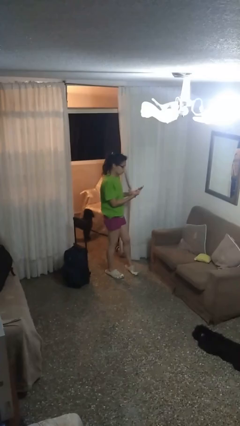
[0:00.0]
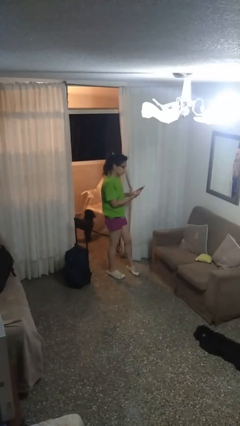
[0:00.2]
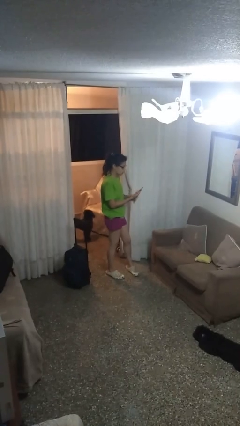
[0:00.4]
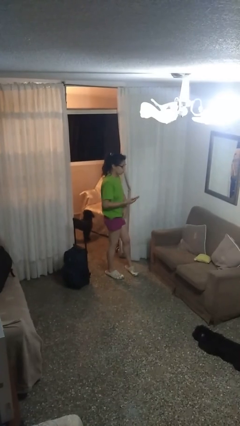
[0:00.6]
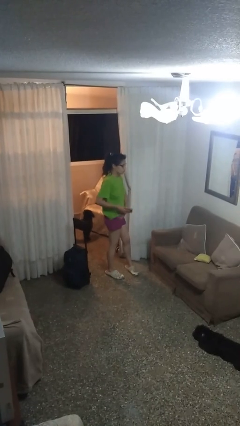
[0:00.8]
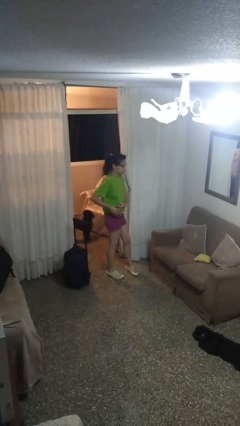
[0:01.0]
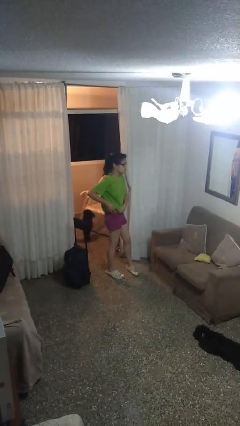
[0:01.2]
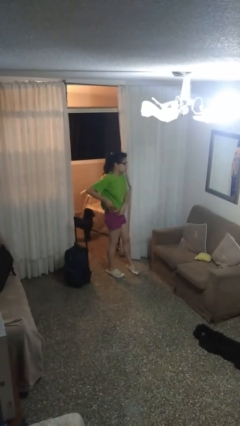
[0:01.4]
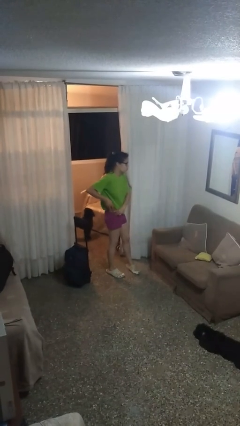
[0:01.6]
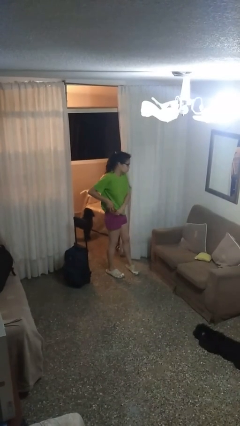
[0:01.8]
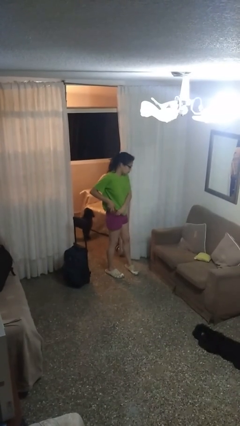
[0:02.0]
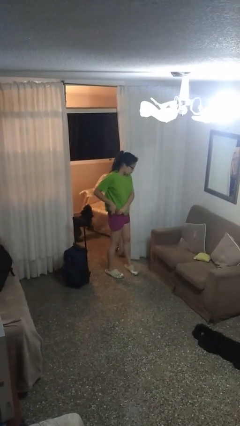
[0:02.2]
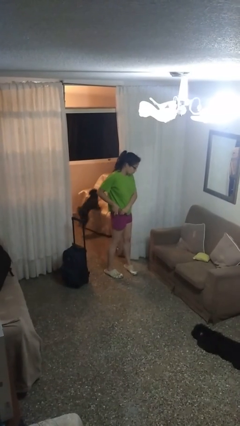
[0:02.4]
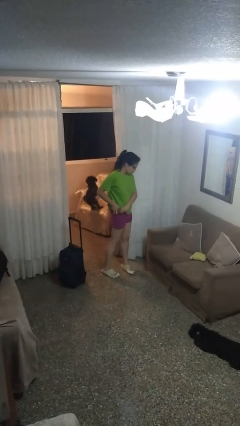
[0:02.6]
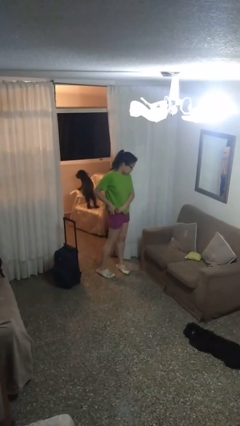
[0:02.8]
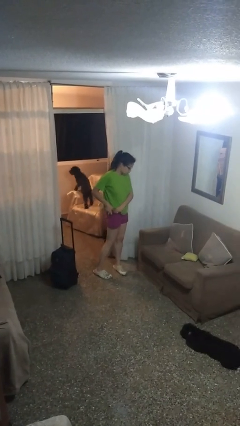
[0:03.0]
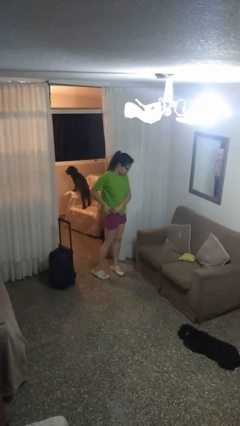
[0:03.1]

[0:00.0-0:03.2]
person puts phone into pocket

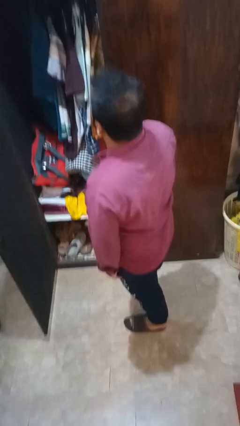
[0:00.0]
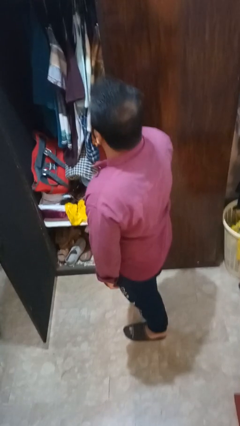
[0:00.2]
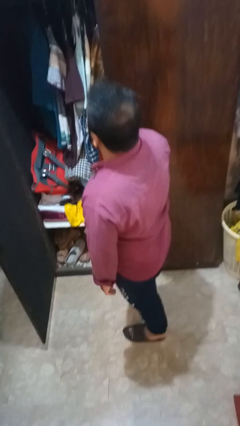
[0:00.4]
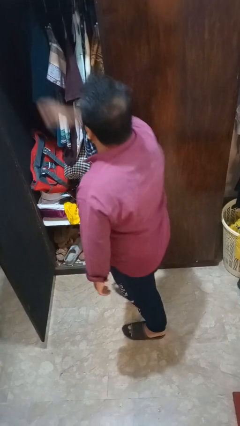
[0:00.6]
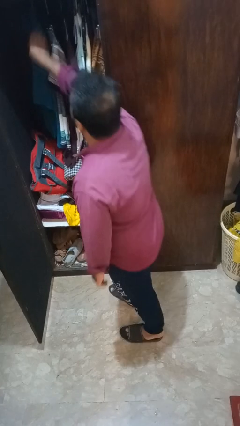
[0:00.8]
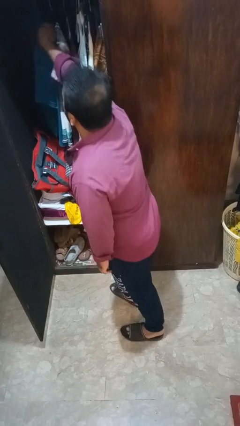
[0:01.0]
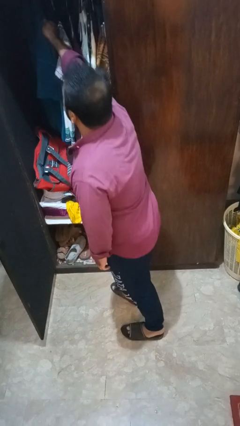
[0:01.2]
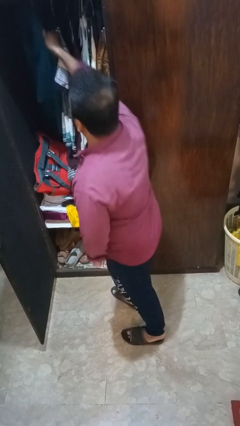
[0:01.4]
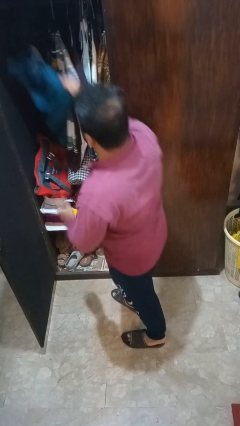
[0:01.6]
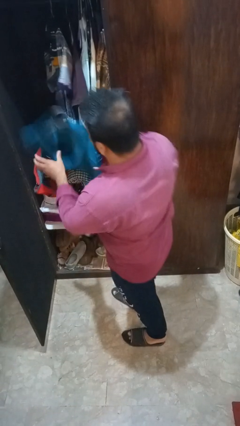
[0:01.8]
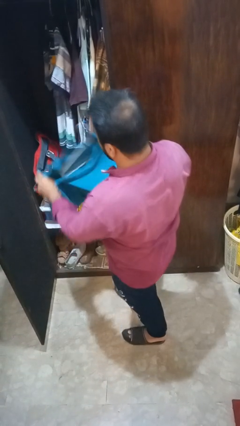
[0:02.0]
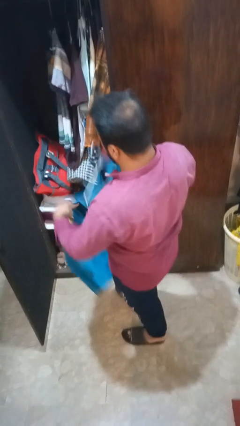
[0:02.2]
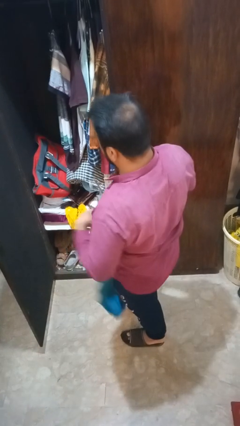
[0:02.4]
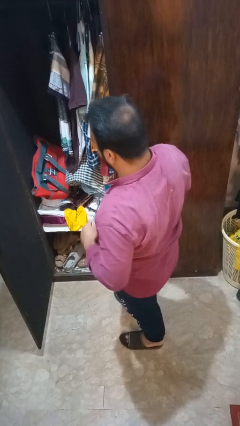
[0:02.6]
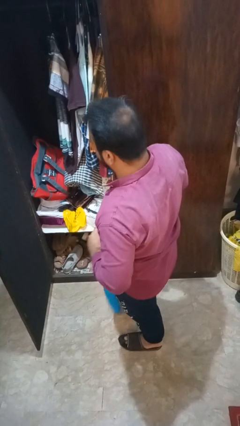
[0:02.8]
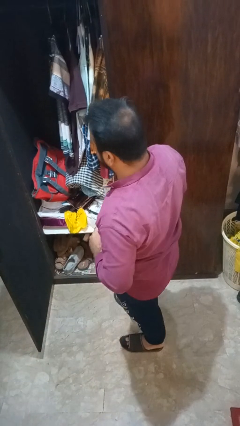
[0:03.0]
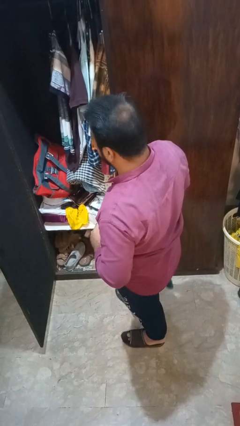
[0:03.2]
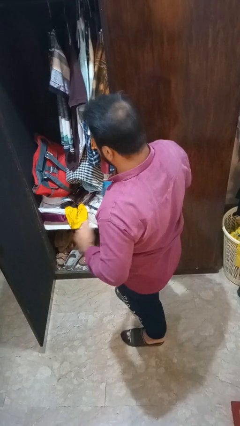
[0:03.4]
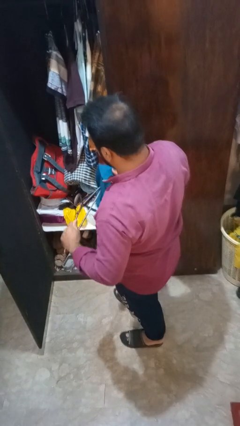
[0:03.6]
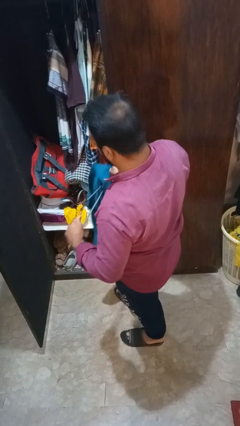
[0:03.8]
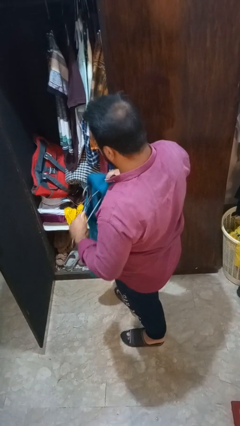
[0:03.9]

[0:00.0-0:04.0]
person takes clothes from closet

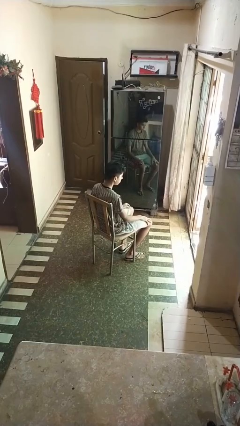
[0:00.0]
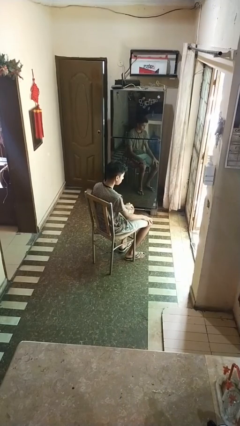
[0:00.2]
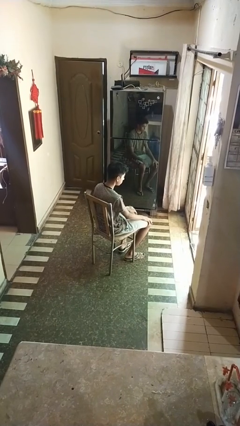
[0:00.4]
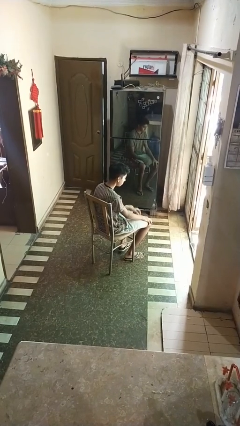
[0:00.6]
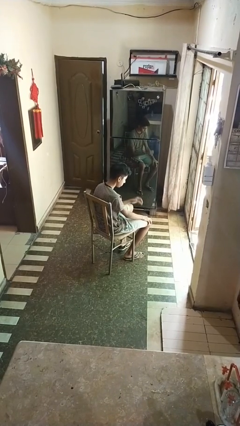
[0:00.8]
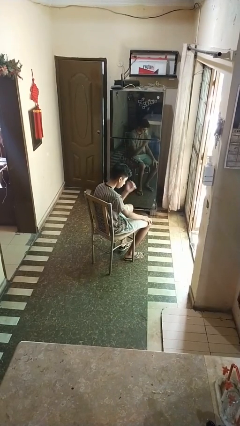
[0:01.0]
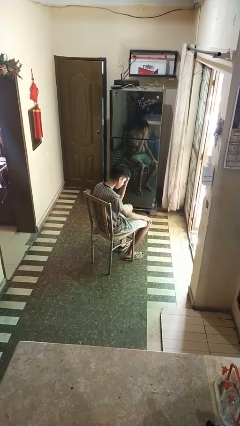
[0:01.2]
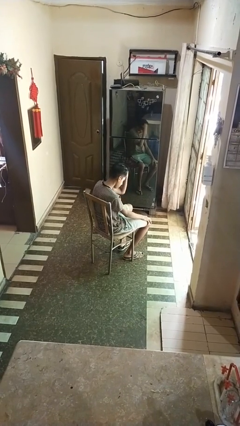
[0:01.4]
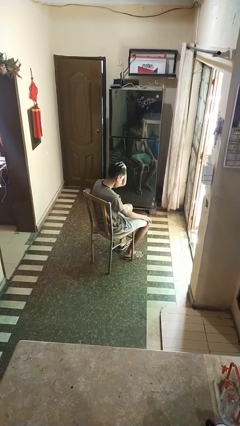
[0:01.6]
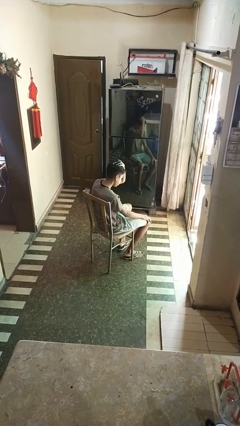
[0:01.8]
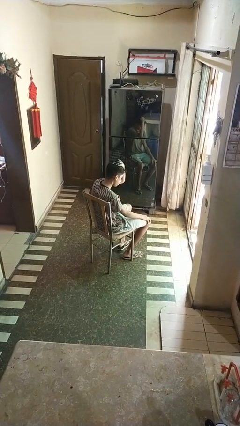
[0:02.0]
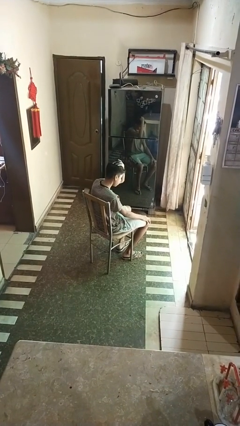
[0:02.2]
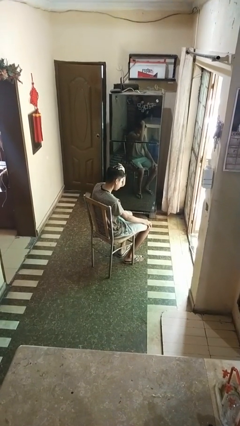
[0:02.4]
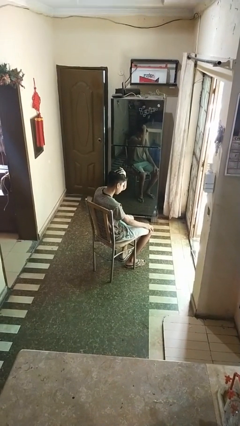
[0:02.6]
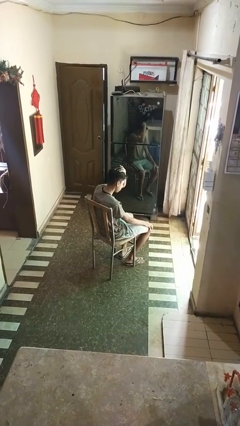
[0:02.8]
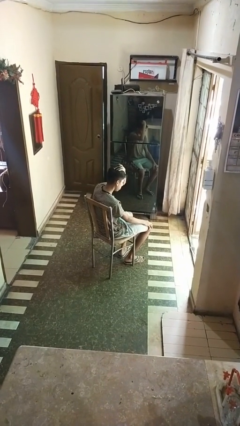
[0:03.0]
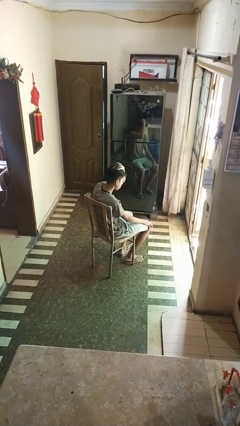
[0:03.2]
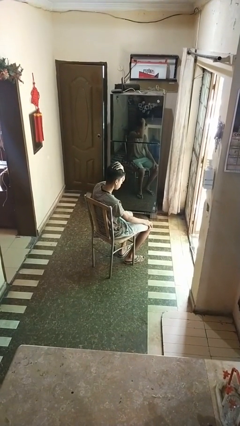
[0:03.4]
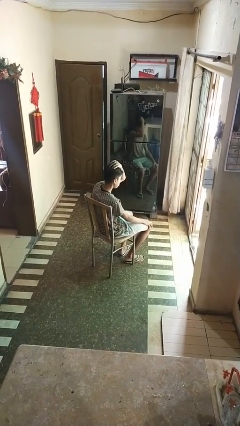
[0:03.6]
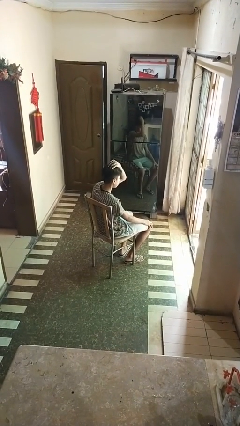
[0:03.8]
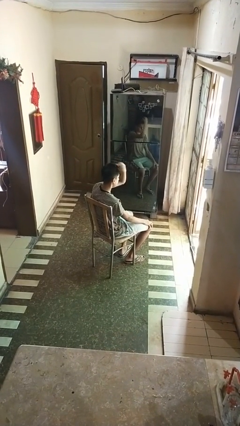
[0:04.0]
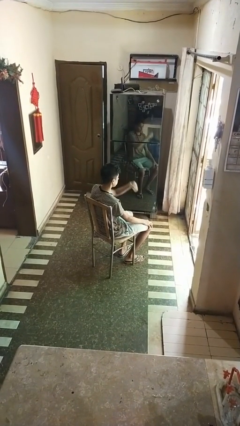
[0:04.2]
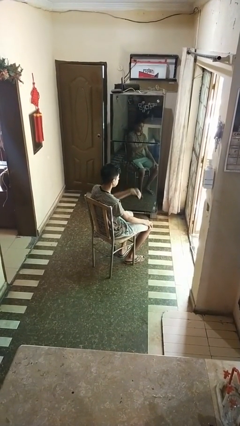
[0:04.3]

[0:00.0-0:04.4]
person strokes hair

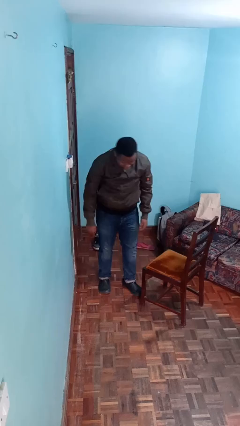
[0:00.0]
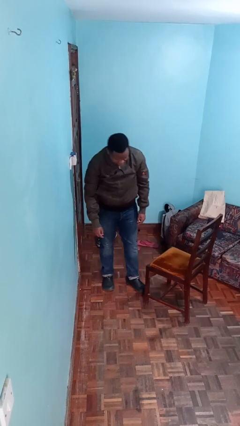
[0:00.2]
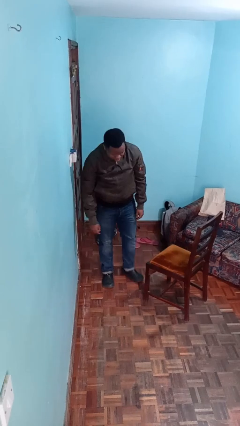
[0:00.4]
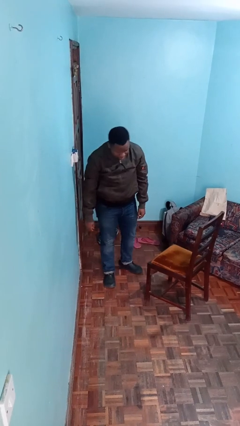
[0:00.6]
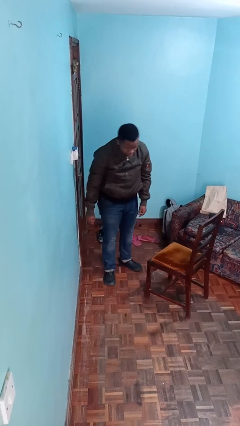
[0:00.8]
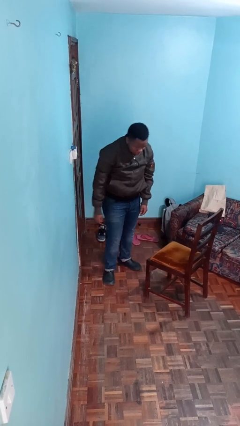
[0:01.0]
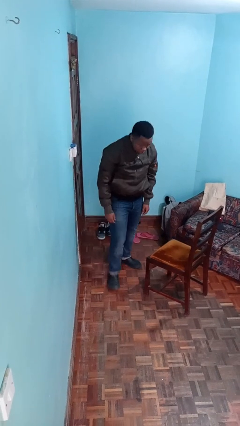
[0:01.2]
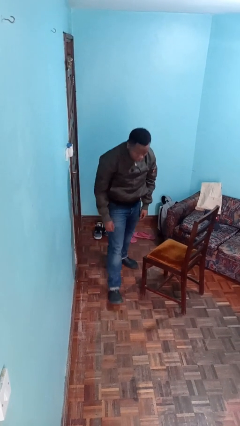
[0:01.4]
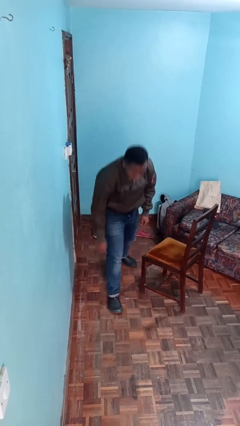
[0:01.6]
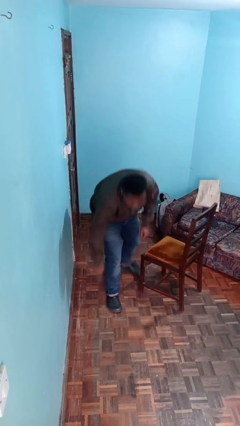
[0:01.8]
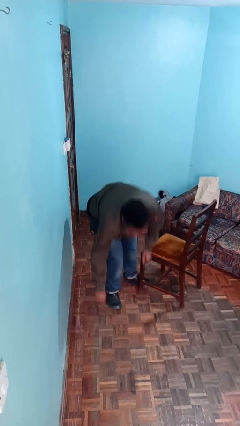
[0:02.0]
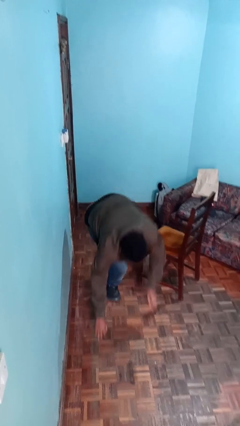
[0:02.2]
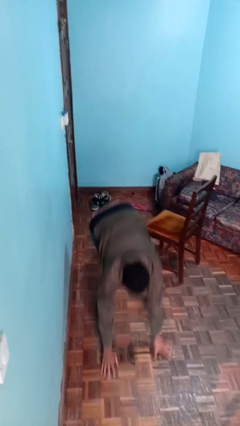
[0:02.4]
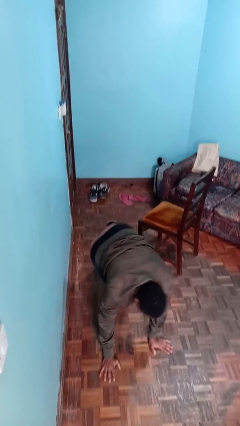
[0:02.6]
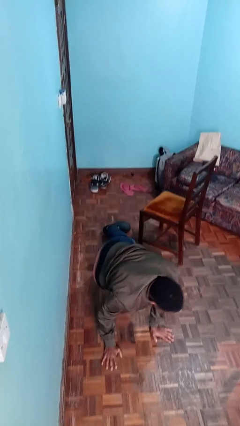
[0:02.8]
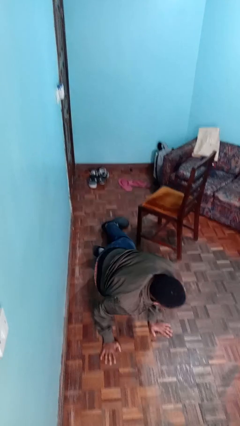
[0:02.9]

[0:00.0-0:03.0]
person trips on object on floor

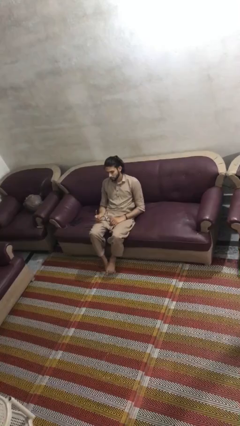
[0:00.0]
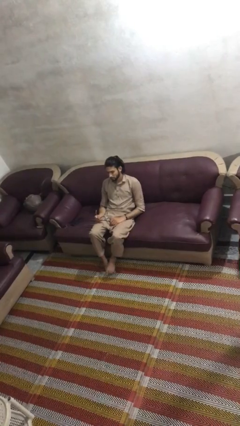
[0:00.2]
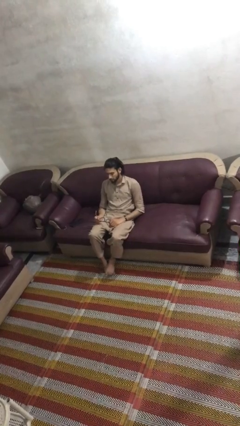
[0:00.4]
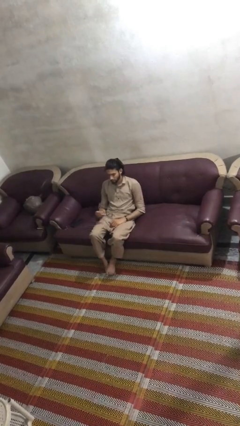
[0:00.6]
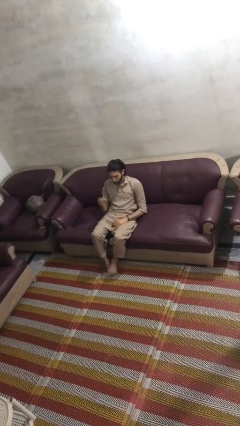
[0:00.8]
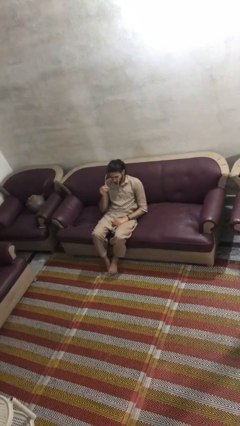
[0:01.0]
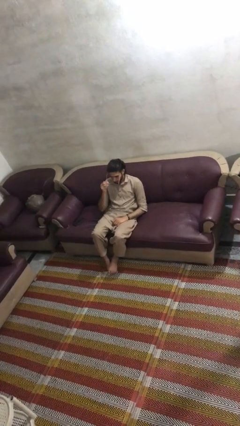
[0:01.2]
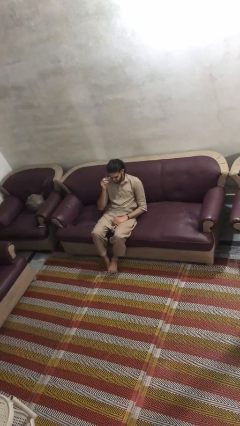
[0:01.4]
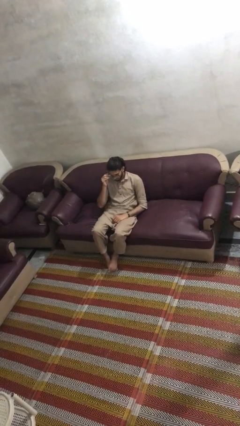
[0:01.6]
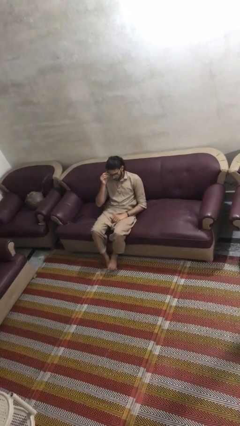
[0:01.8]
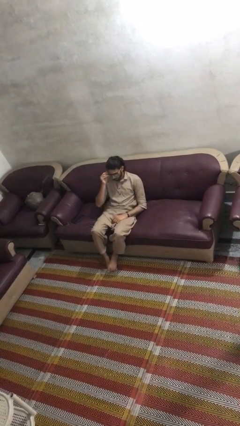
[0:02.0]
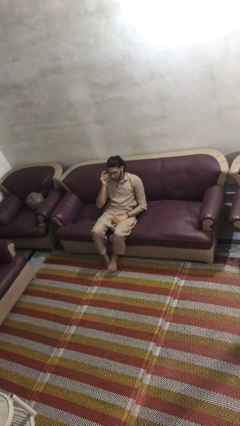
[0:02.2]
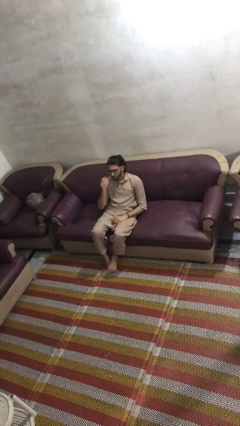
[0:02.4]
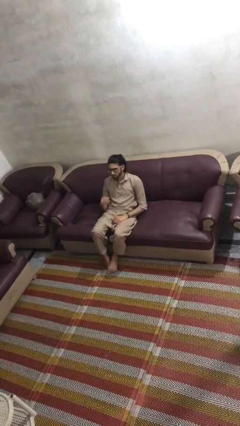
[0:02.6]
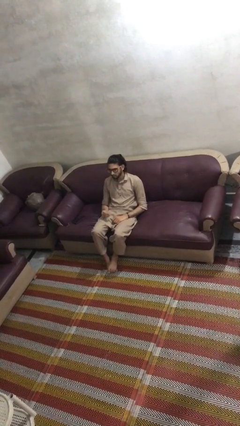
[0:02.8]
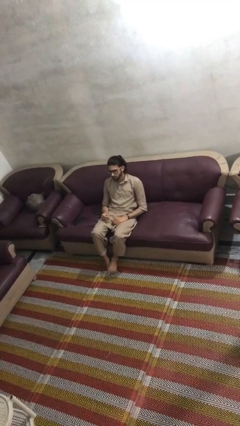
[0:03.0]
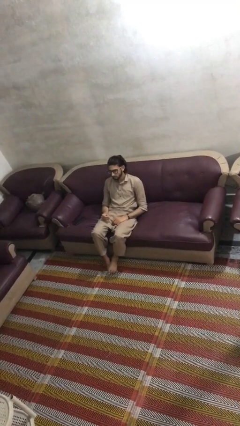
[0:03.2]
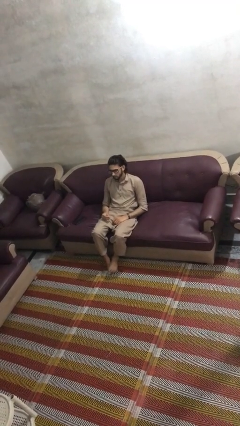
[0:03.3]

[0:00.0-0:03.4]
person puts on glasses
